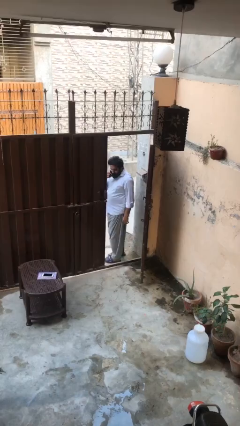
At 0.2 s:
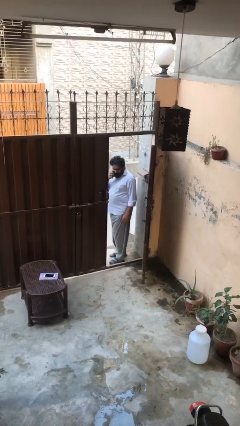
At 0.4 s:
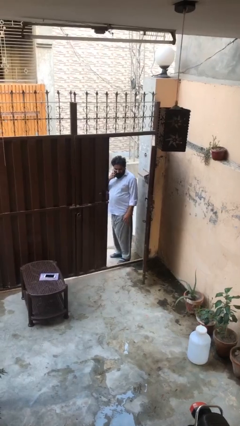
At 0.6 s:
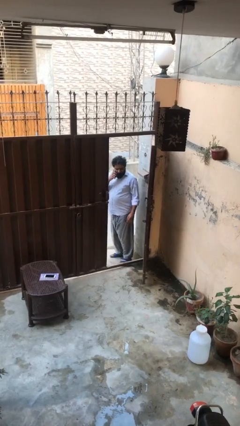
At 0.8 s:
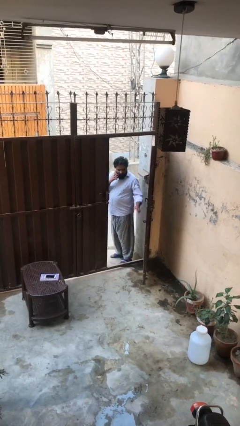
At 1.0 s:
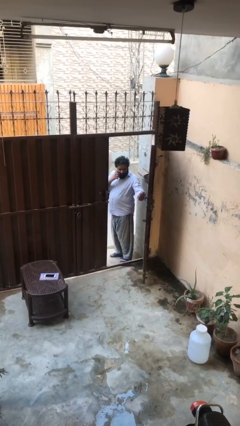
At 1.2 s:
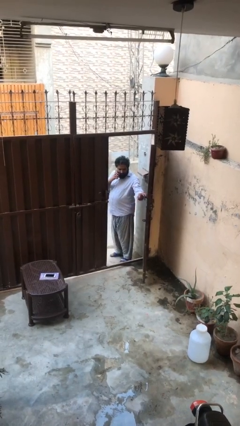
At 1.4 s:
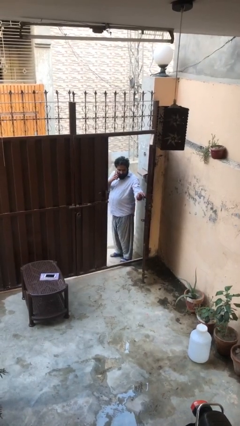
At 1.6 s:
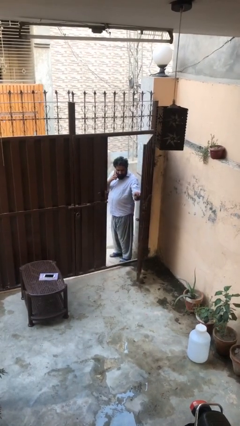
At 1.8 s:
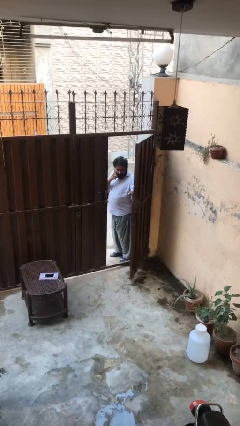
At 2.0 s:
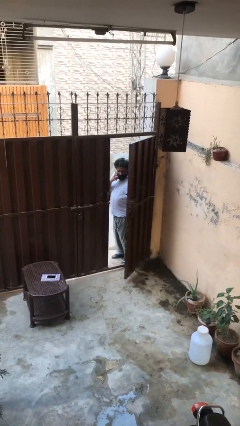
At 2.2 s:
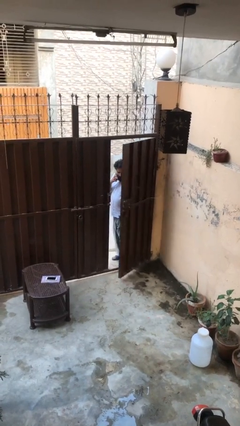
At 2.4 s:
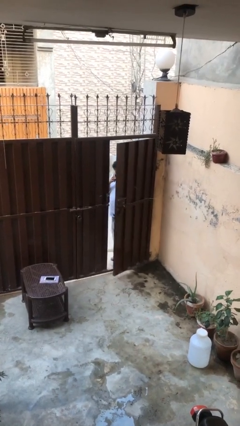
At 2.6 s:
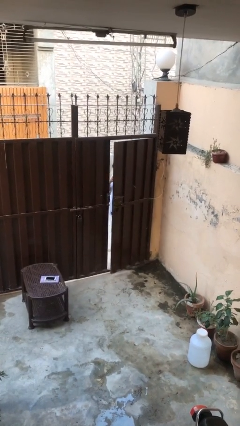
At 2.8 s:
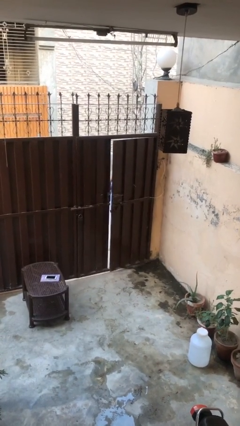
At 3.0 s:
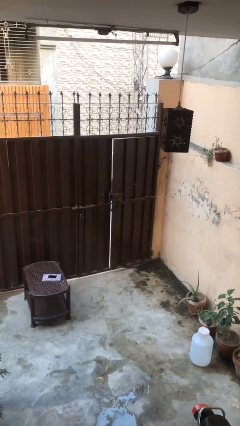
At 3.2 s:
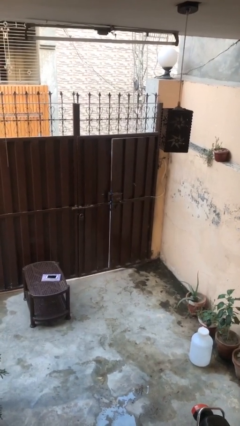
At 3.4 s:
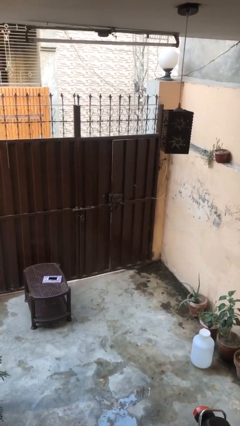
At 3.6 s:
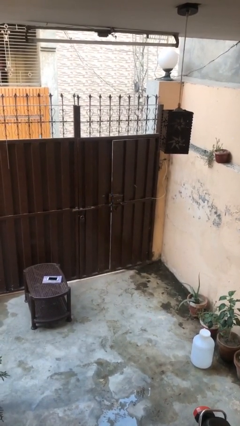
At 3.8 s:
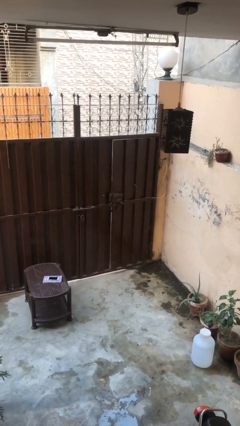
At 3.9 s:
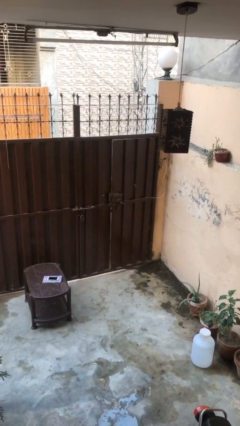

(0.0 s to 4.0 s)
person closes facility door

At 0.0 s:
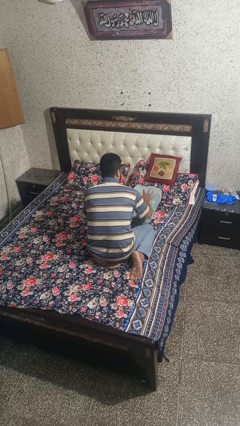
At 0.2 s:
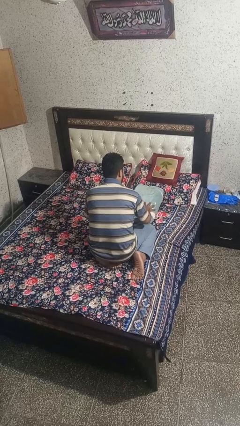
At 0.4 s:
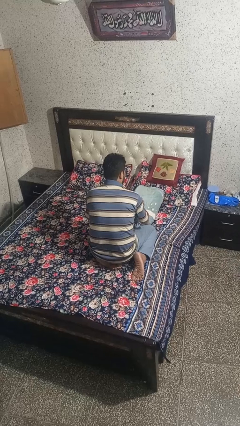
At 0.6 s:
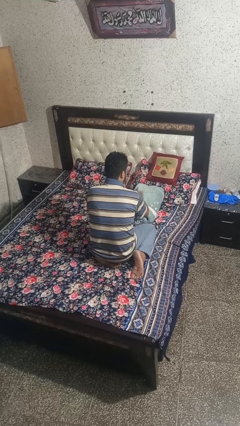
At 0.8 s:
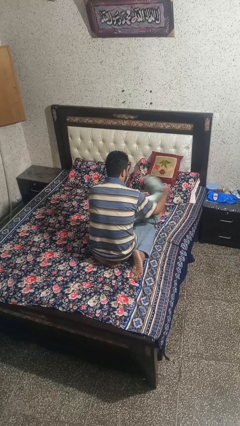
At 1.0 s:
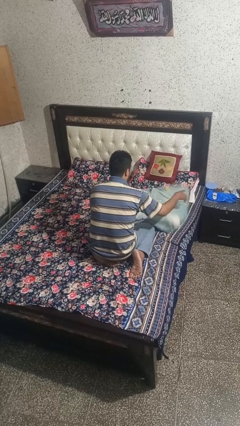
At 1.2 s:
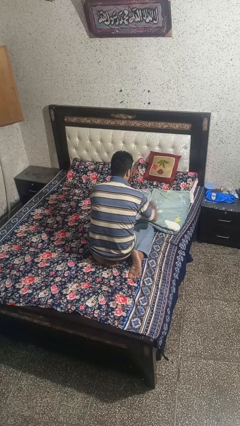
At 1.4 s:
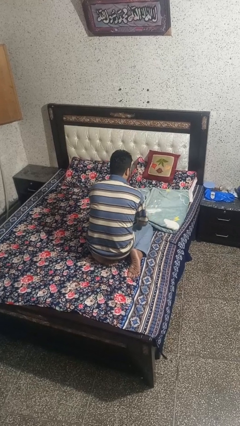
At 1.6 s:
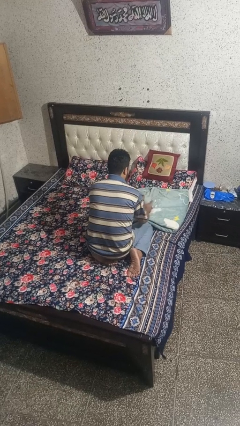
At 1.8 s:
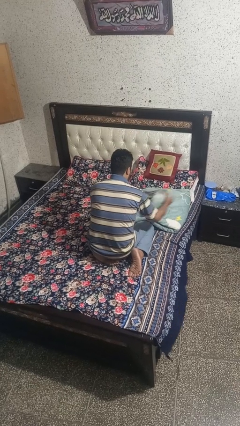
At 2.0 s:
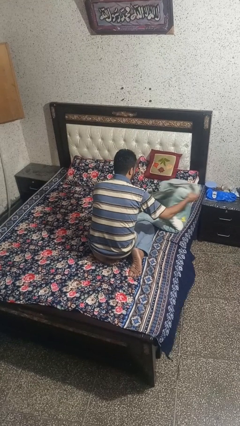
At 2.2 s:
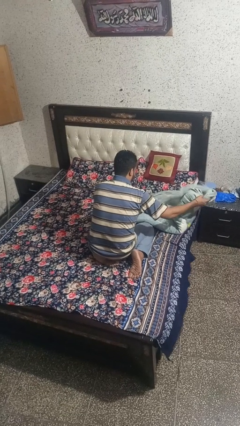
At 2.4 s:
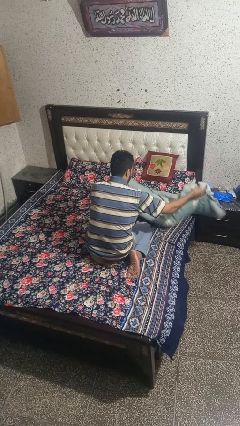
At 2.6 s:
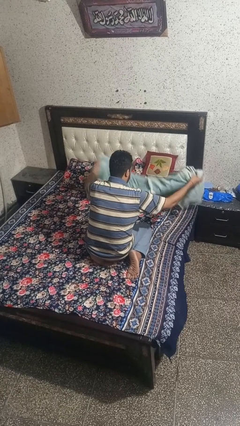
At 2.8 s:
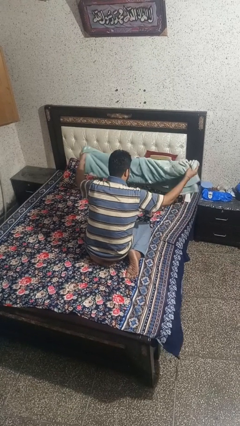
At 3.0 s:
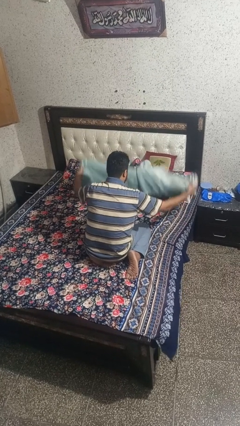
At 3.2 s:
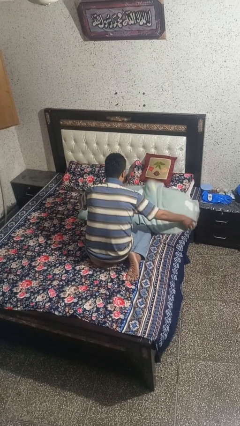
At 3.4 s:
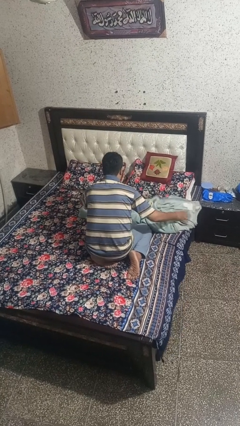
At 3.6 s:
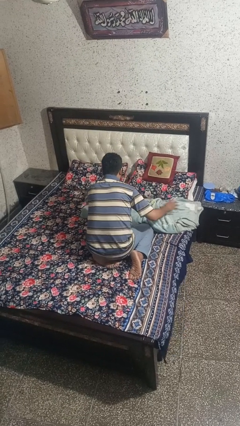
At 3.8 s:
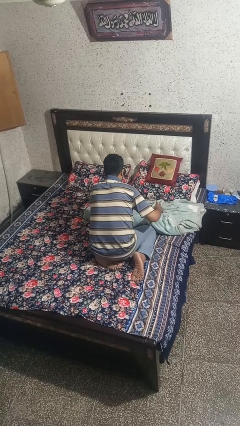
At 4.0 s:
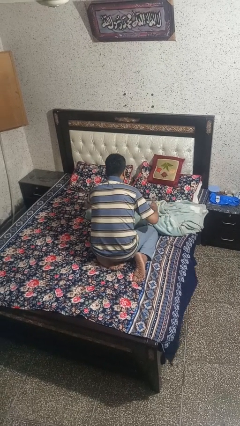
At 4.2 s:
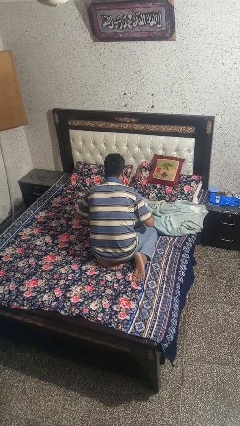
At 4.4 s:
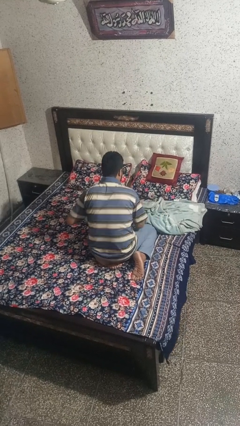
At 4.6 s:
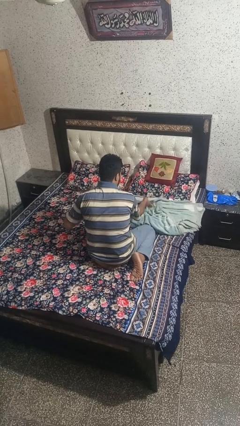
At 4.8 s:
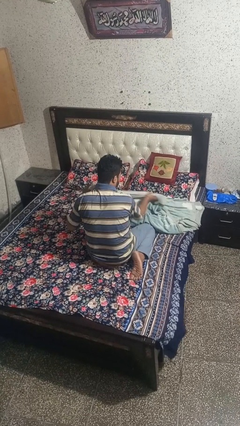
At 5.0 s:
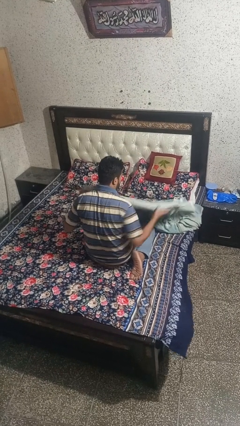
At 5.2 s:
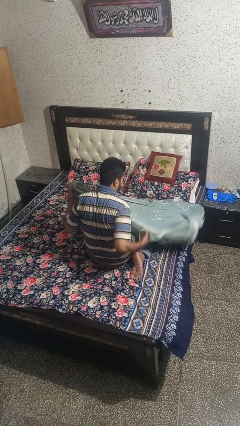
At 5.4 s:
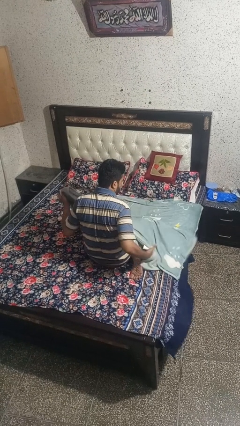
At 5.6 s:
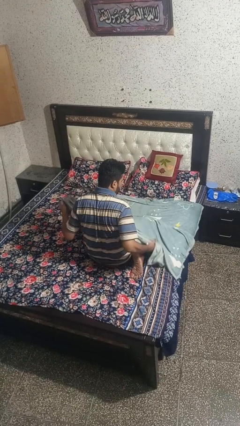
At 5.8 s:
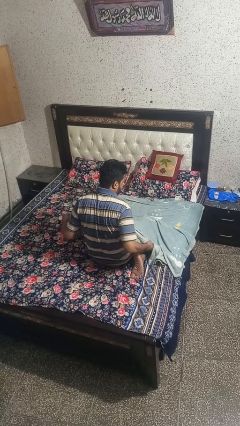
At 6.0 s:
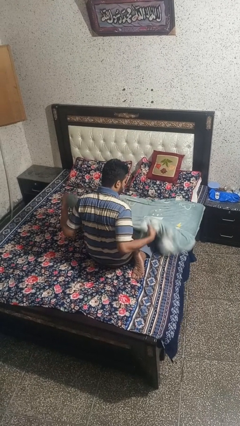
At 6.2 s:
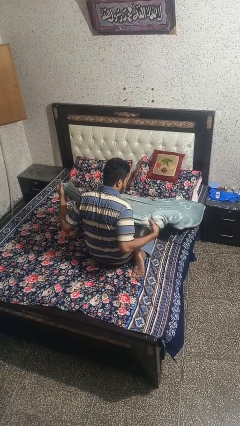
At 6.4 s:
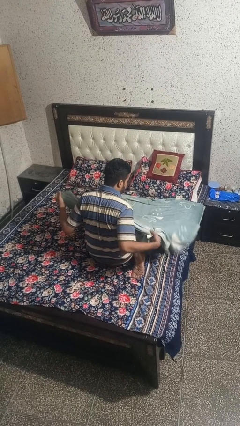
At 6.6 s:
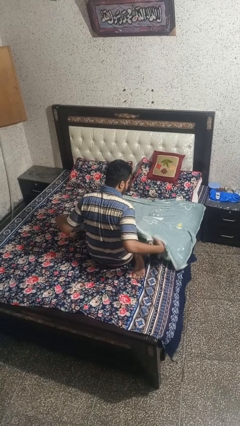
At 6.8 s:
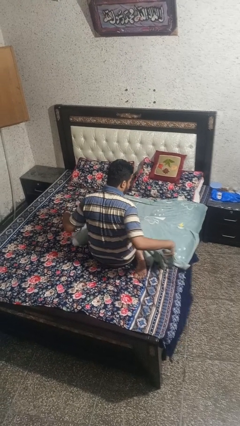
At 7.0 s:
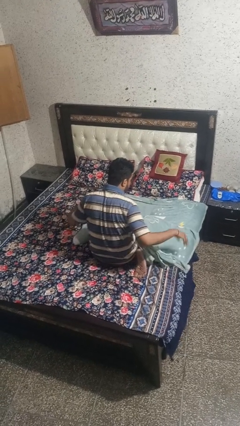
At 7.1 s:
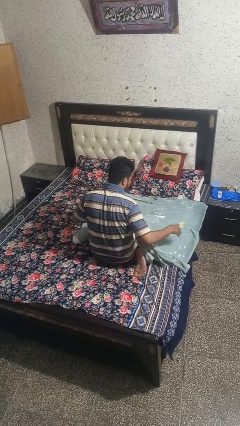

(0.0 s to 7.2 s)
person unfolds blanket

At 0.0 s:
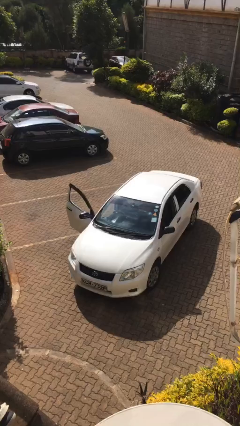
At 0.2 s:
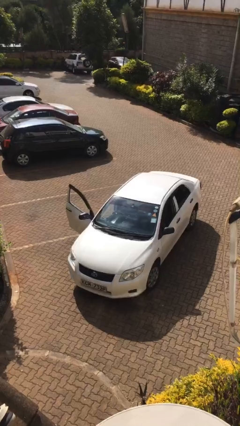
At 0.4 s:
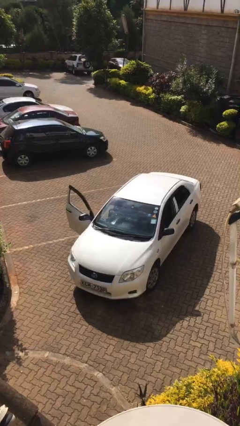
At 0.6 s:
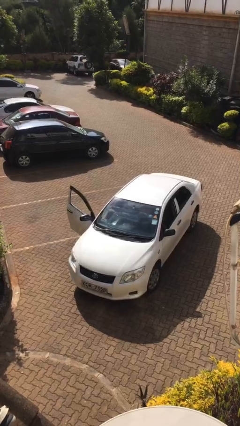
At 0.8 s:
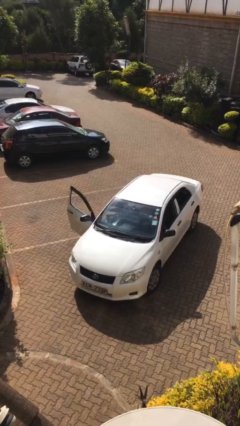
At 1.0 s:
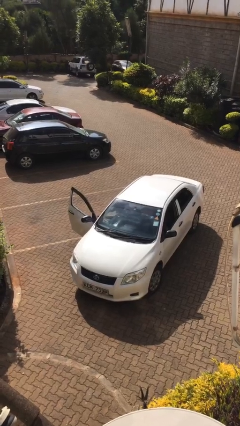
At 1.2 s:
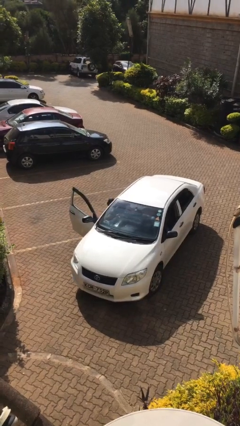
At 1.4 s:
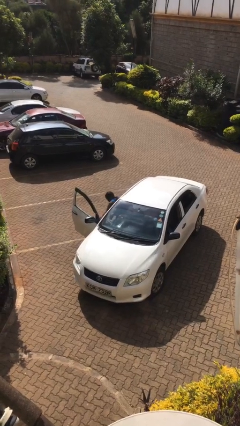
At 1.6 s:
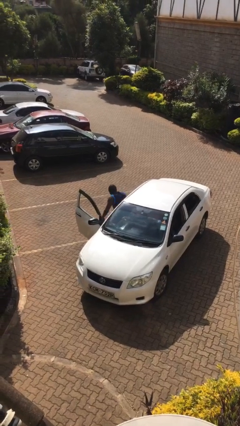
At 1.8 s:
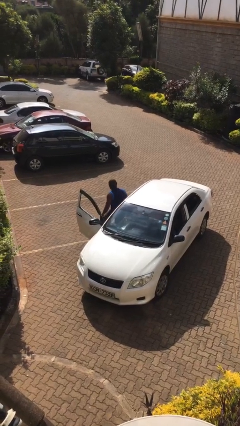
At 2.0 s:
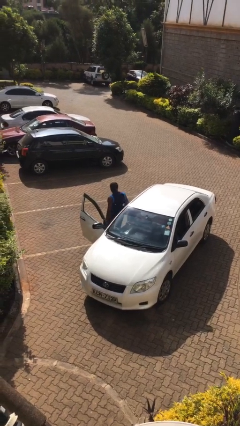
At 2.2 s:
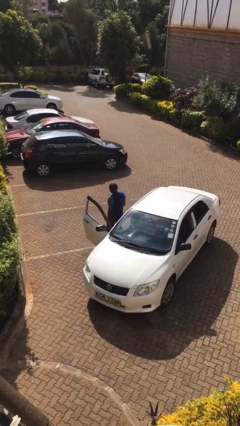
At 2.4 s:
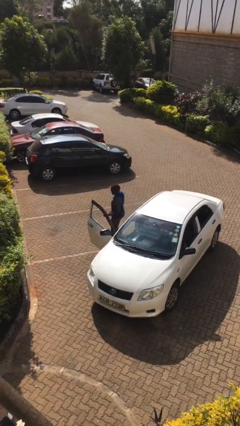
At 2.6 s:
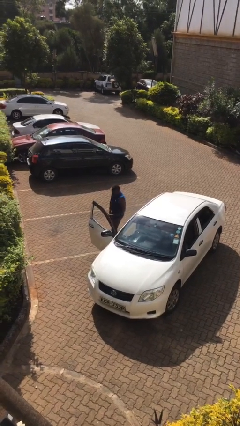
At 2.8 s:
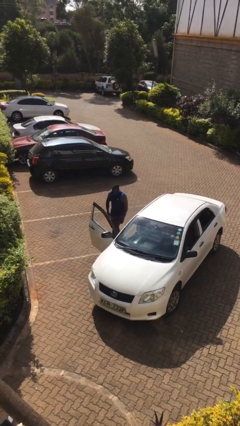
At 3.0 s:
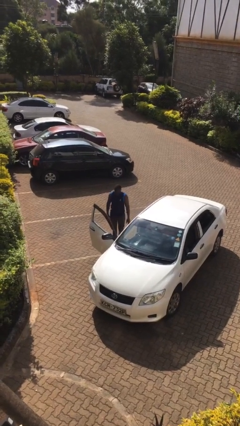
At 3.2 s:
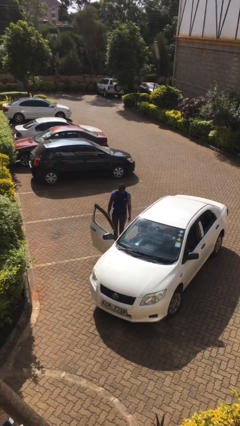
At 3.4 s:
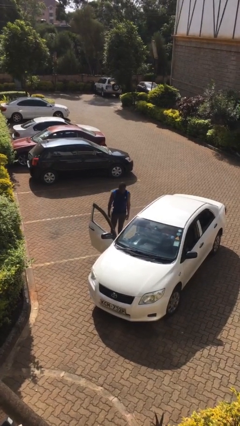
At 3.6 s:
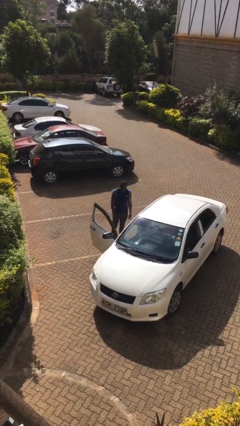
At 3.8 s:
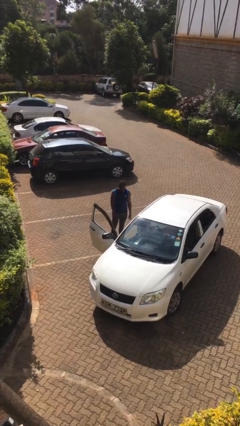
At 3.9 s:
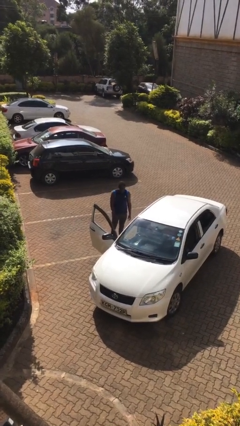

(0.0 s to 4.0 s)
person exits car

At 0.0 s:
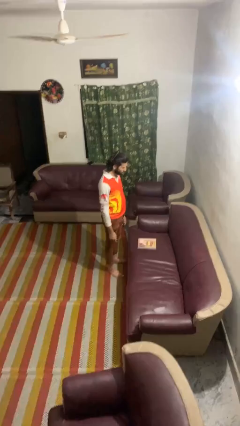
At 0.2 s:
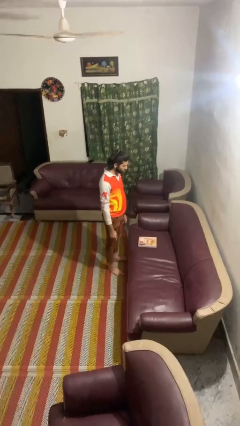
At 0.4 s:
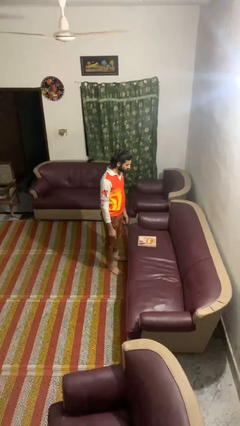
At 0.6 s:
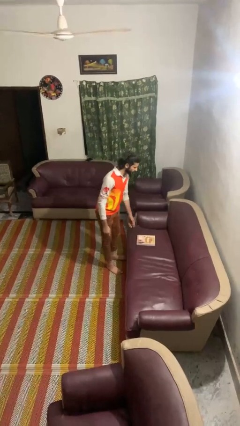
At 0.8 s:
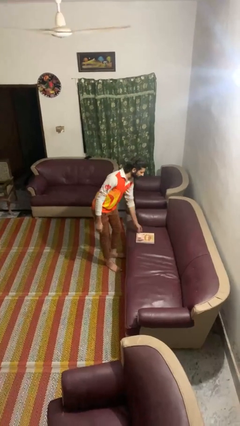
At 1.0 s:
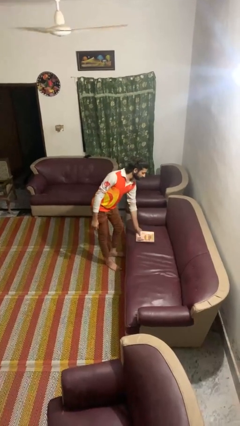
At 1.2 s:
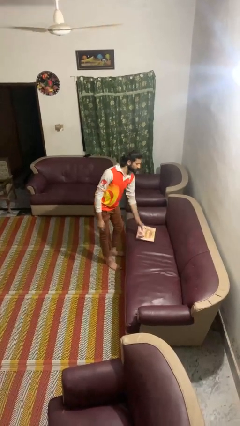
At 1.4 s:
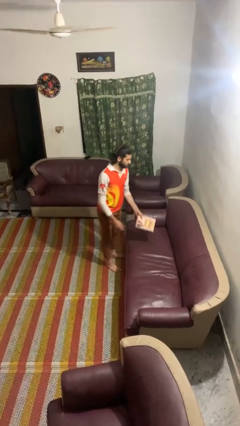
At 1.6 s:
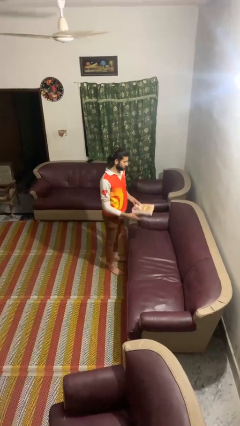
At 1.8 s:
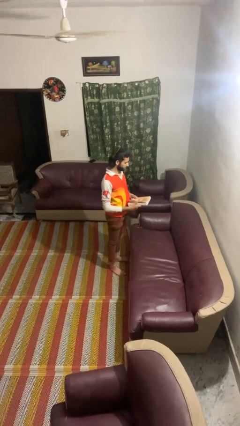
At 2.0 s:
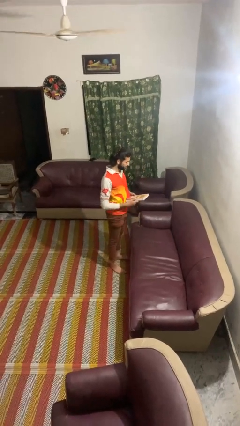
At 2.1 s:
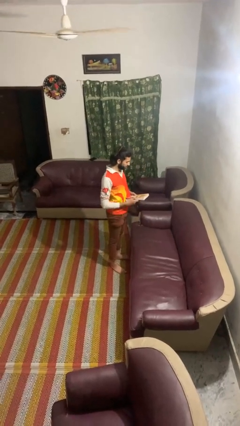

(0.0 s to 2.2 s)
person picks up object from couch

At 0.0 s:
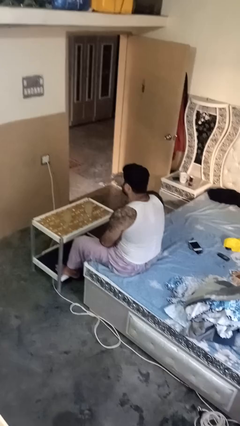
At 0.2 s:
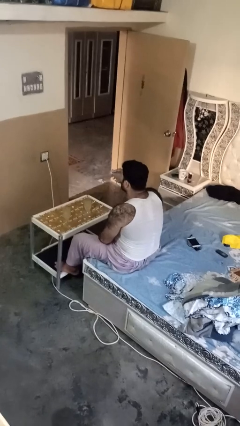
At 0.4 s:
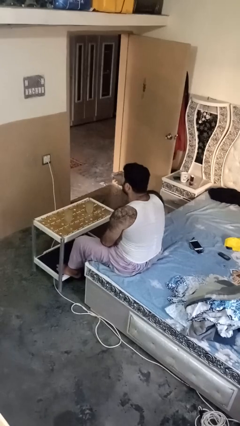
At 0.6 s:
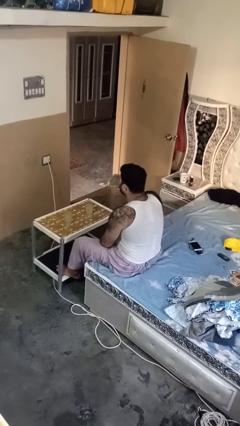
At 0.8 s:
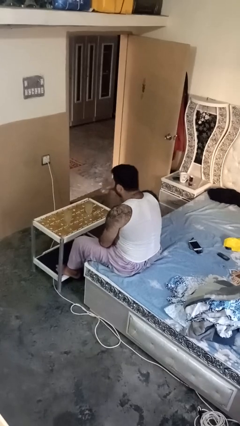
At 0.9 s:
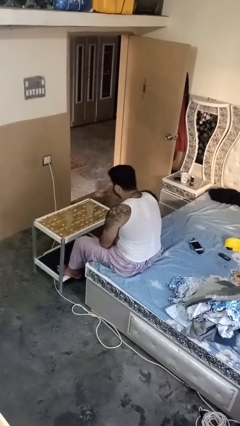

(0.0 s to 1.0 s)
person puts down object on table
